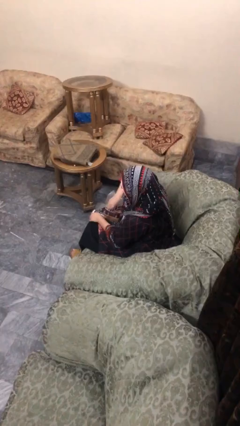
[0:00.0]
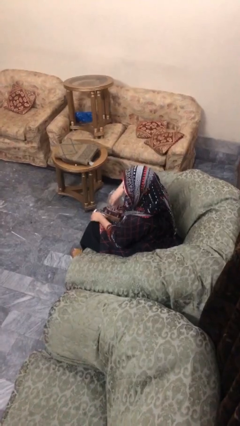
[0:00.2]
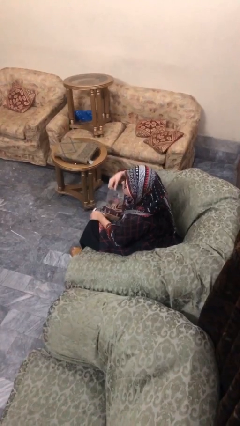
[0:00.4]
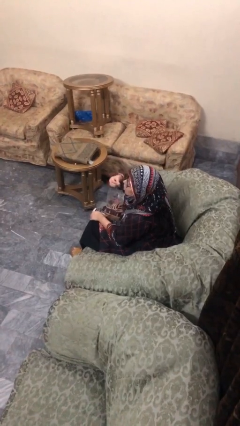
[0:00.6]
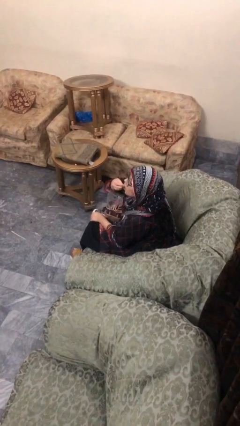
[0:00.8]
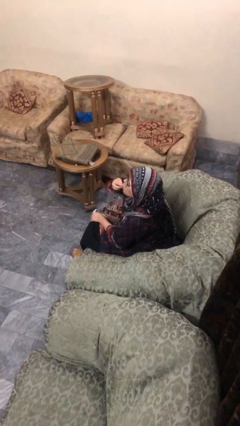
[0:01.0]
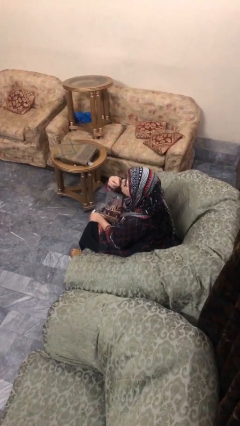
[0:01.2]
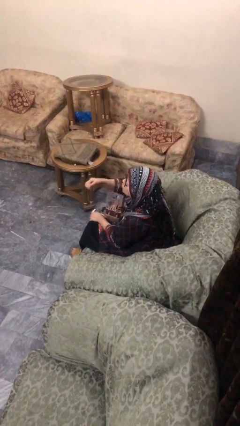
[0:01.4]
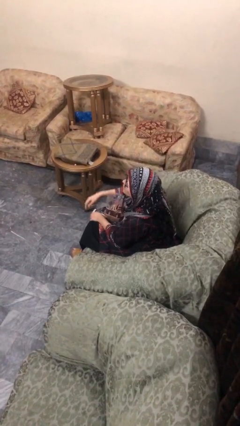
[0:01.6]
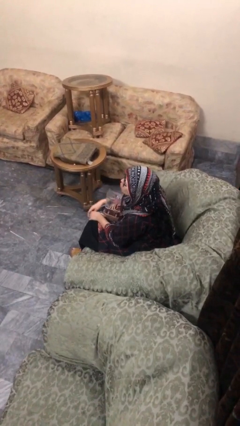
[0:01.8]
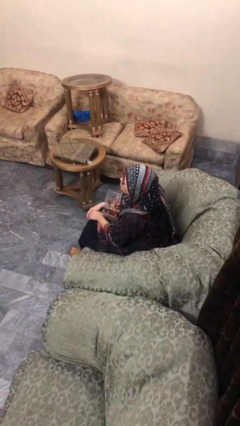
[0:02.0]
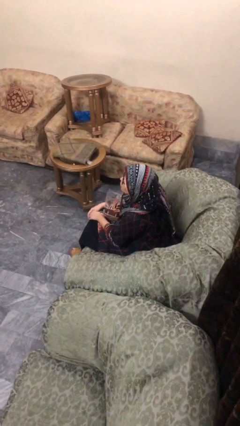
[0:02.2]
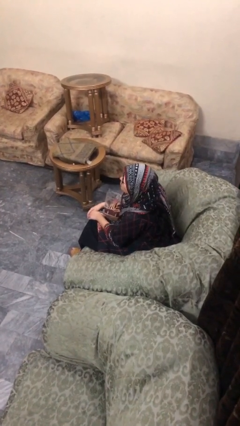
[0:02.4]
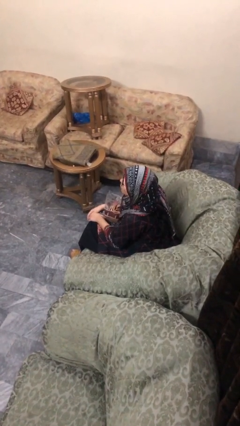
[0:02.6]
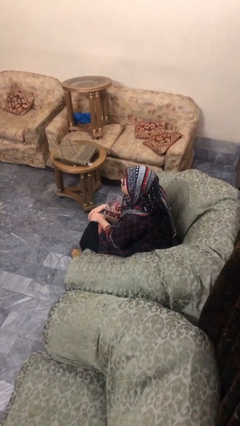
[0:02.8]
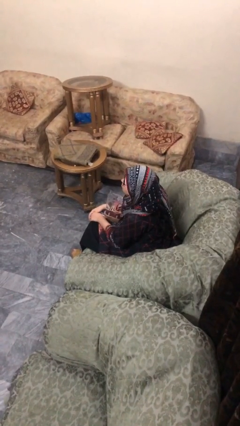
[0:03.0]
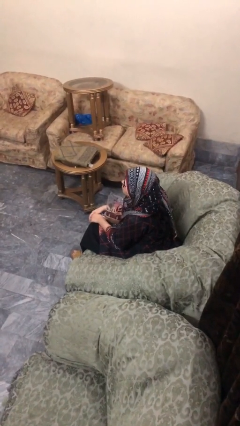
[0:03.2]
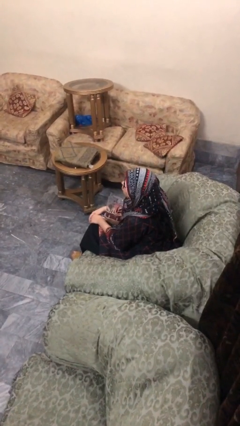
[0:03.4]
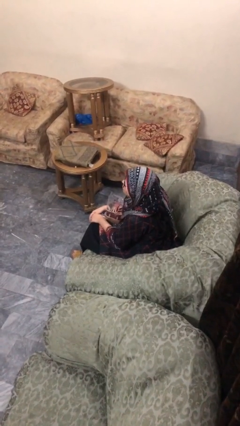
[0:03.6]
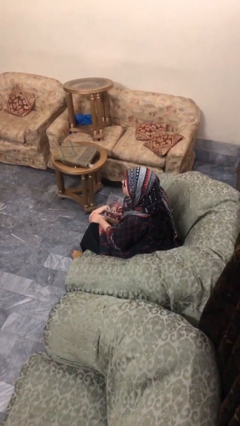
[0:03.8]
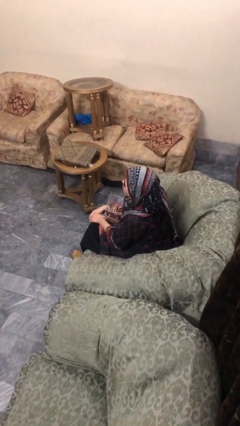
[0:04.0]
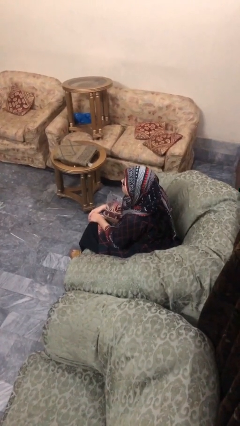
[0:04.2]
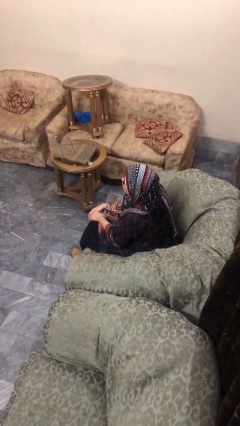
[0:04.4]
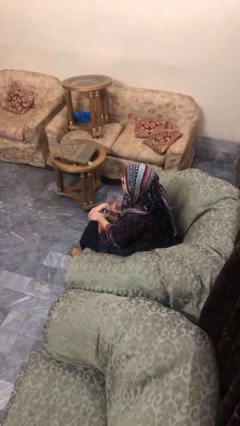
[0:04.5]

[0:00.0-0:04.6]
person eats snack from bag

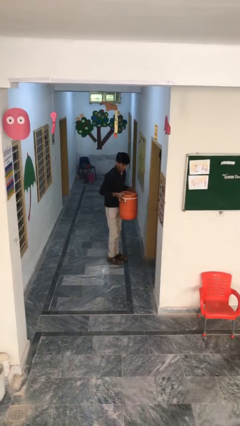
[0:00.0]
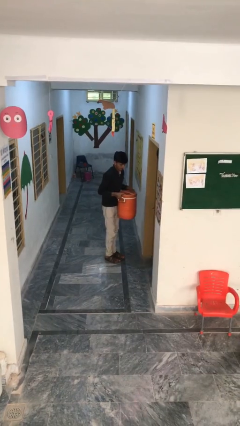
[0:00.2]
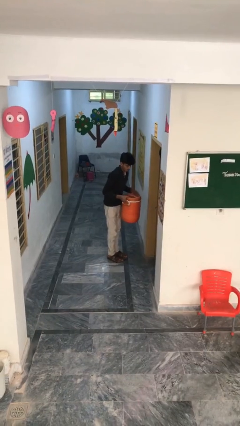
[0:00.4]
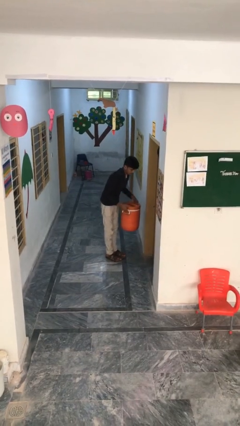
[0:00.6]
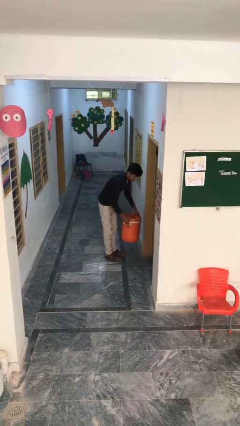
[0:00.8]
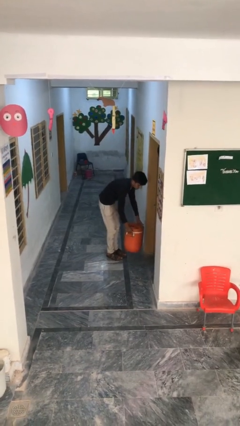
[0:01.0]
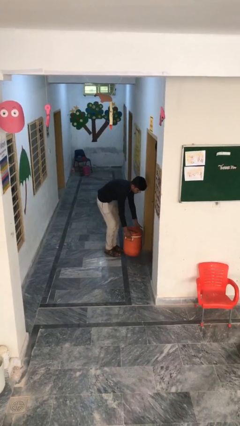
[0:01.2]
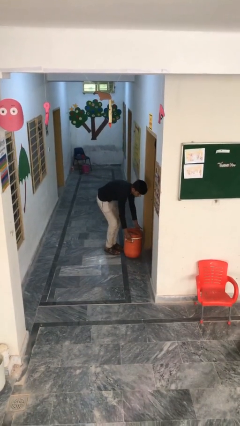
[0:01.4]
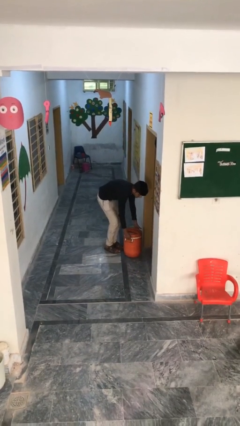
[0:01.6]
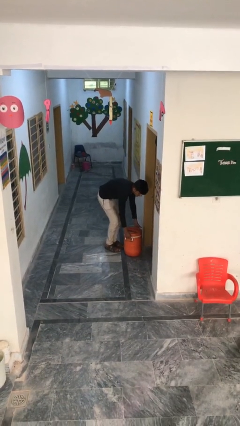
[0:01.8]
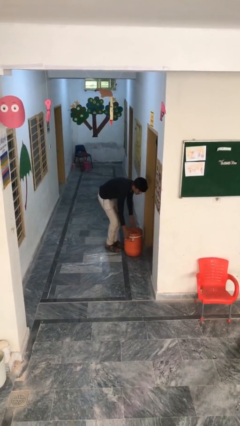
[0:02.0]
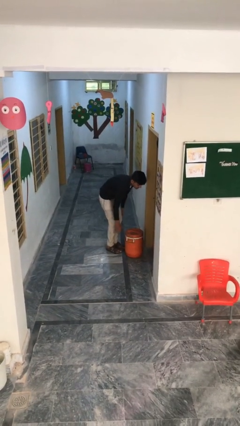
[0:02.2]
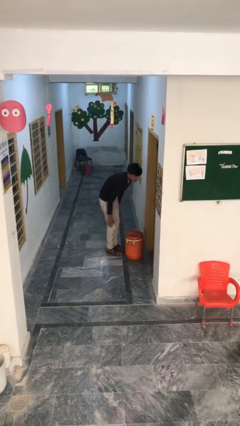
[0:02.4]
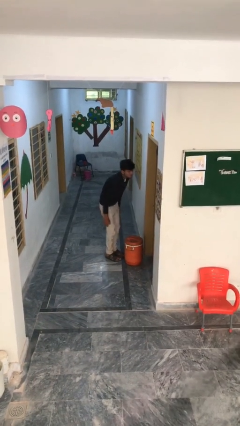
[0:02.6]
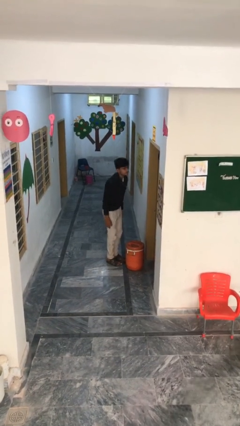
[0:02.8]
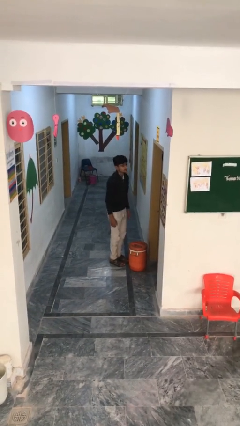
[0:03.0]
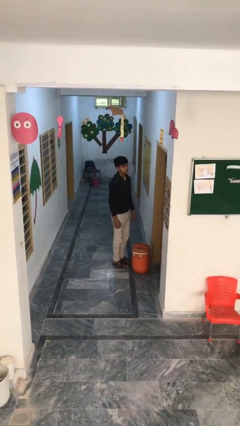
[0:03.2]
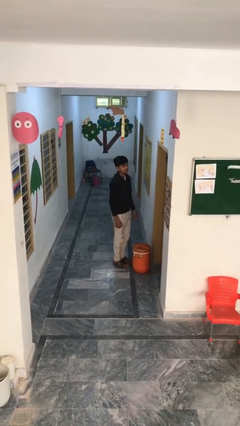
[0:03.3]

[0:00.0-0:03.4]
person puts down object on floor

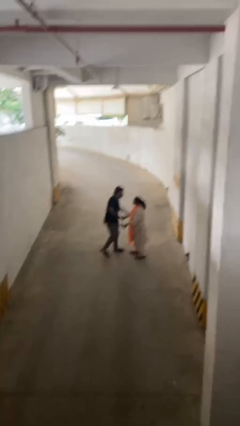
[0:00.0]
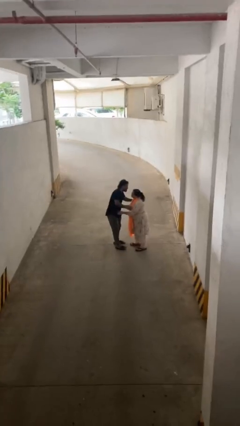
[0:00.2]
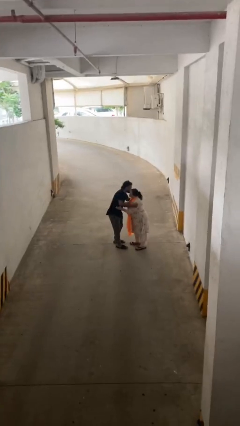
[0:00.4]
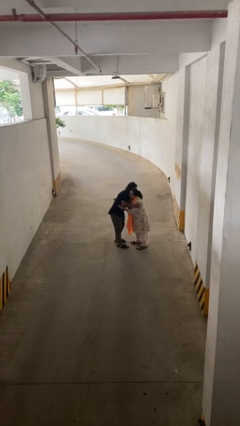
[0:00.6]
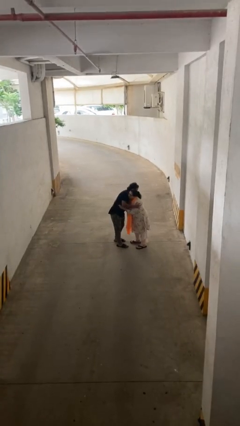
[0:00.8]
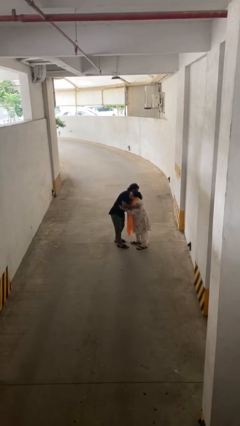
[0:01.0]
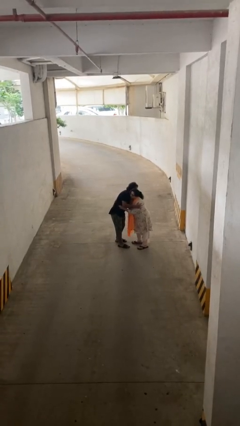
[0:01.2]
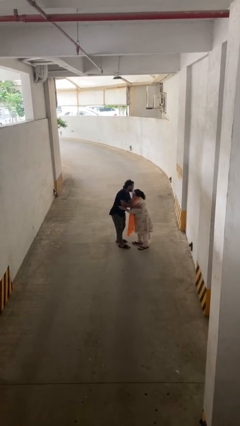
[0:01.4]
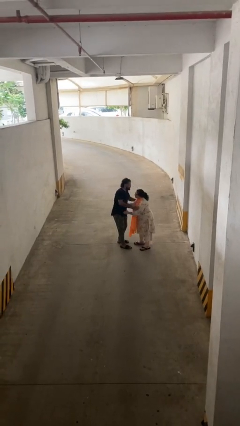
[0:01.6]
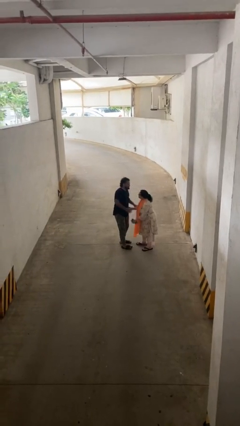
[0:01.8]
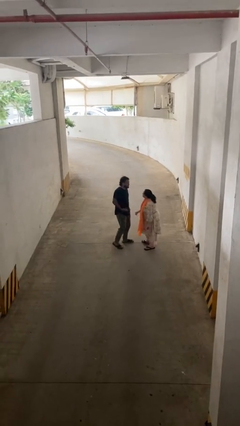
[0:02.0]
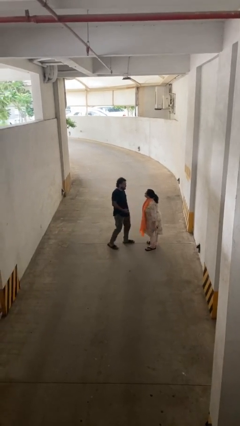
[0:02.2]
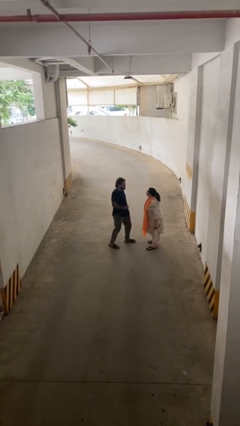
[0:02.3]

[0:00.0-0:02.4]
person embraces person

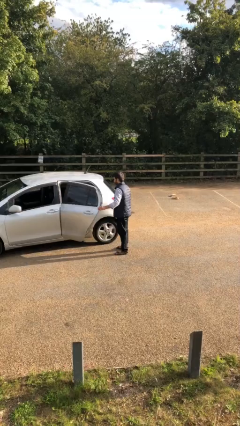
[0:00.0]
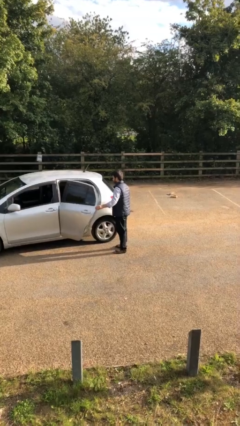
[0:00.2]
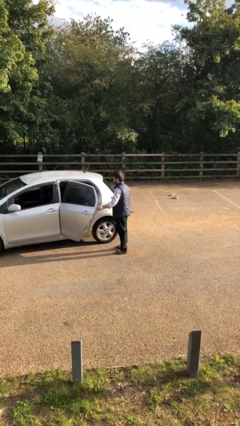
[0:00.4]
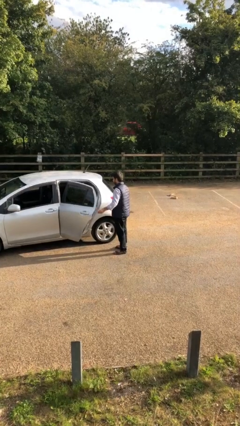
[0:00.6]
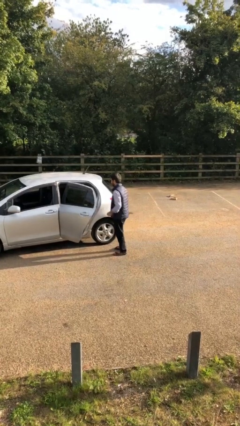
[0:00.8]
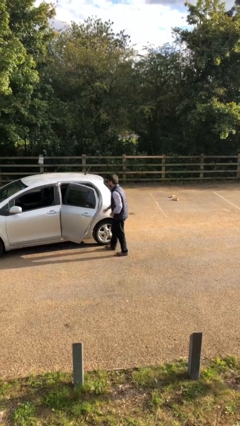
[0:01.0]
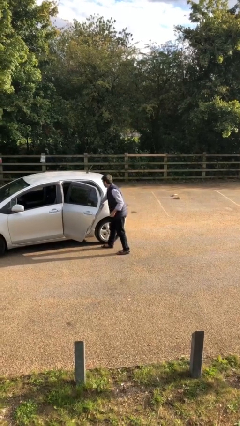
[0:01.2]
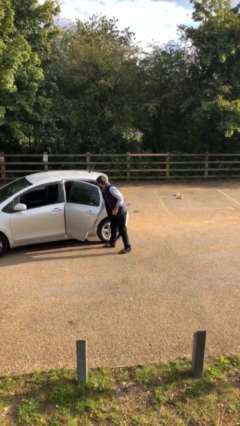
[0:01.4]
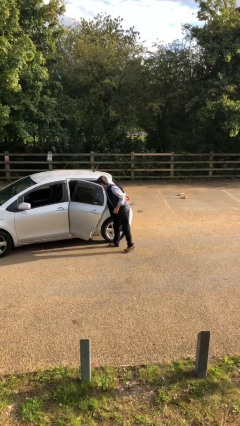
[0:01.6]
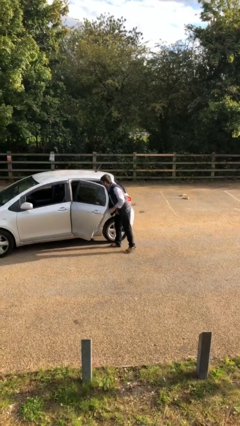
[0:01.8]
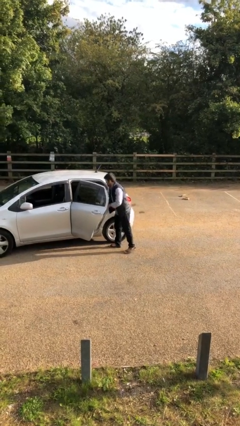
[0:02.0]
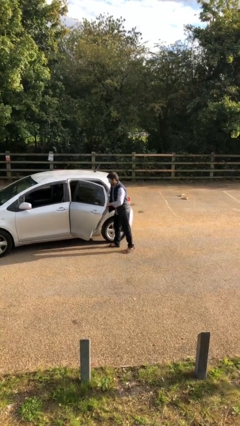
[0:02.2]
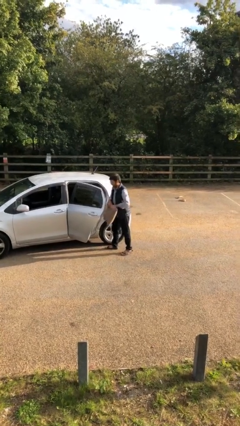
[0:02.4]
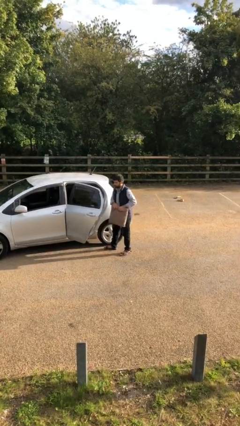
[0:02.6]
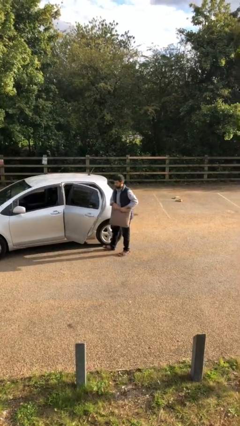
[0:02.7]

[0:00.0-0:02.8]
person unloads car

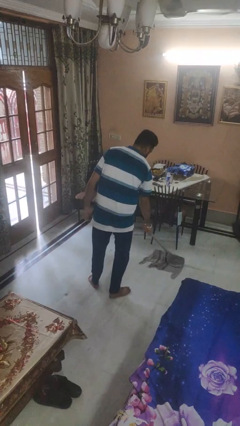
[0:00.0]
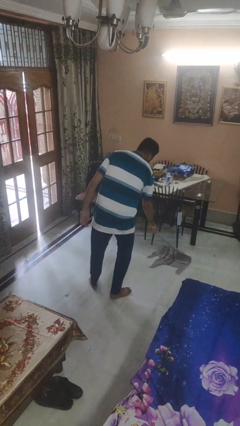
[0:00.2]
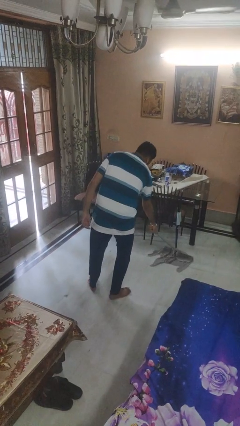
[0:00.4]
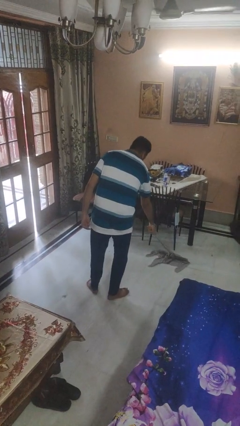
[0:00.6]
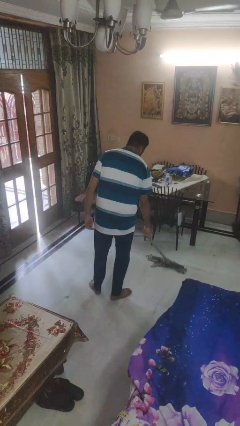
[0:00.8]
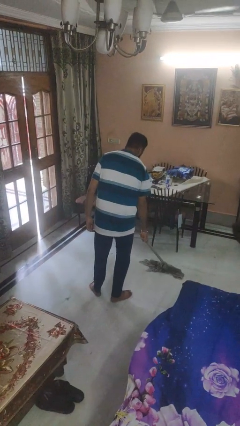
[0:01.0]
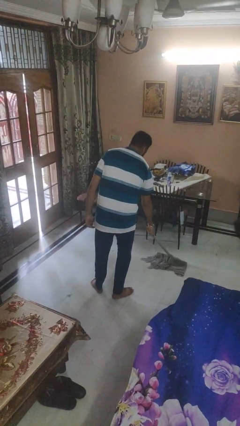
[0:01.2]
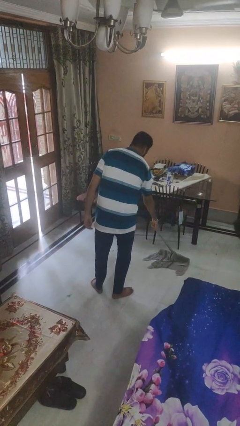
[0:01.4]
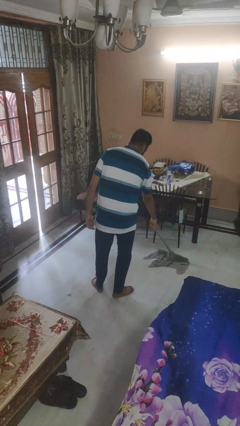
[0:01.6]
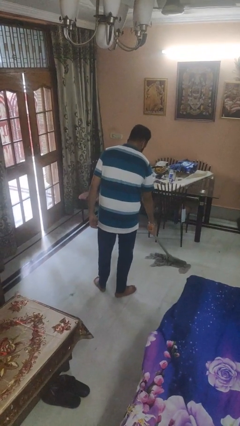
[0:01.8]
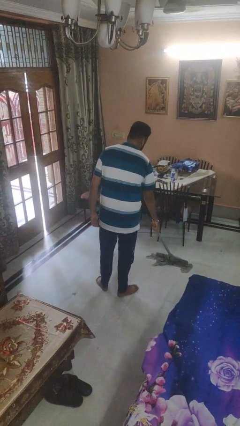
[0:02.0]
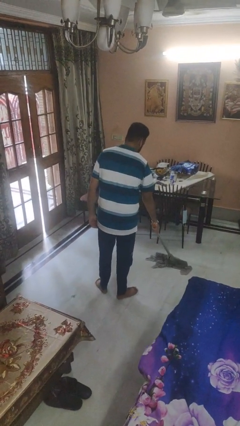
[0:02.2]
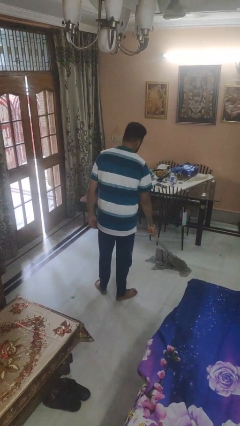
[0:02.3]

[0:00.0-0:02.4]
person mops

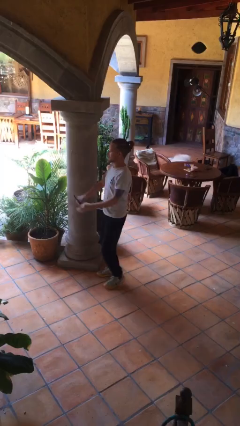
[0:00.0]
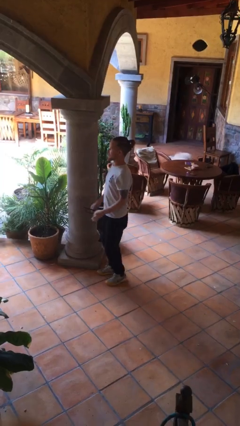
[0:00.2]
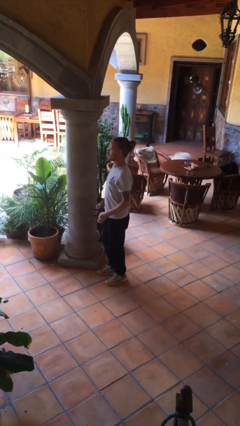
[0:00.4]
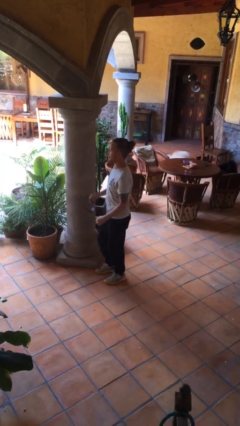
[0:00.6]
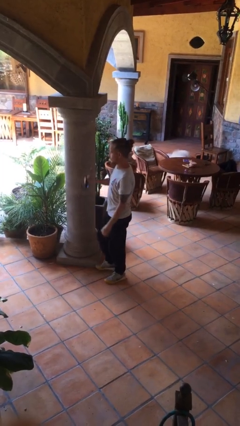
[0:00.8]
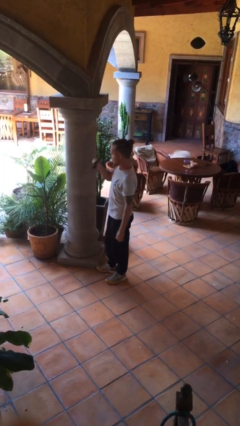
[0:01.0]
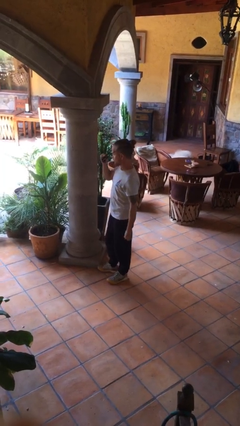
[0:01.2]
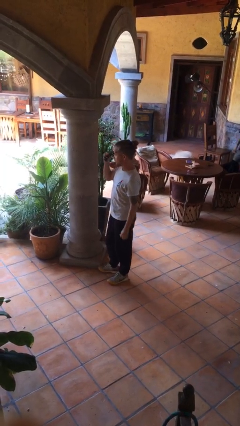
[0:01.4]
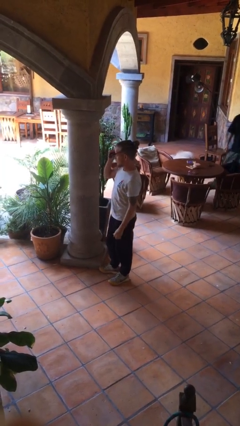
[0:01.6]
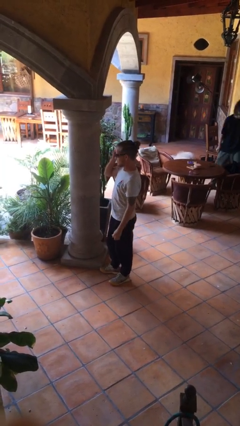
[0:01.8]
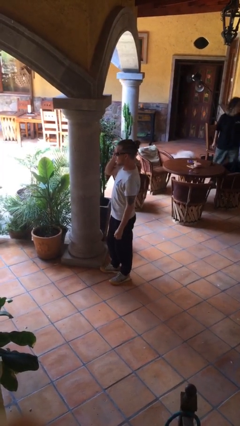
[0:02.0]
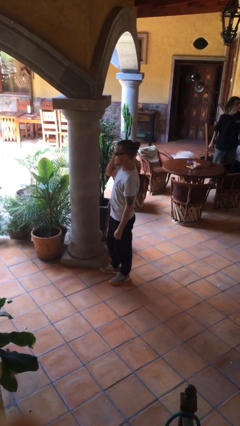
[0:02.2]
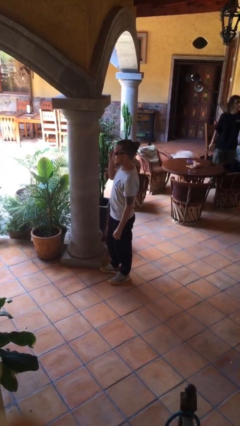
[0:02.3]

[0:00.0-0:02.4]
person puts on sunglasses
